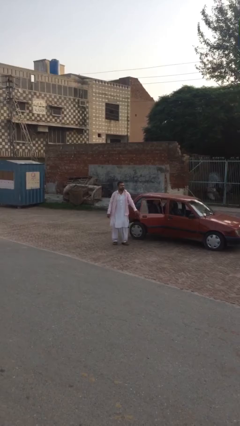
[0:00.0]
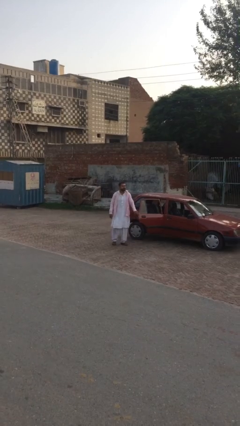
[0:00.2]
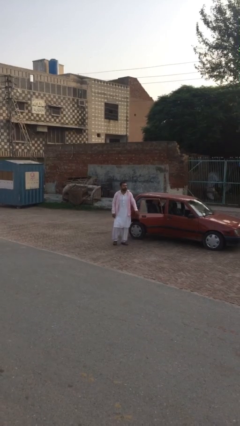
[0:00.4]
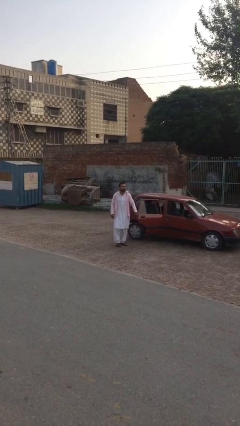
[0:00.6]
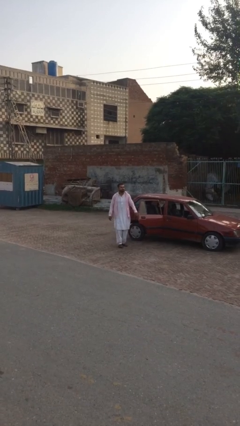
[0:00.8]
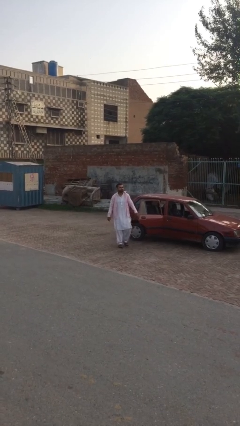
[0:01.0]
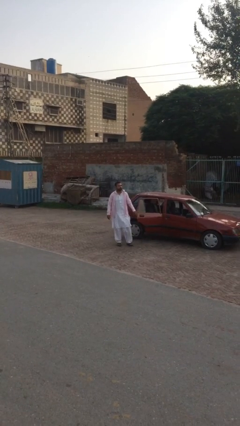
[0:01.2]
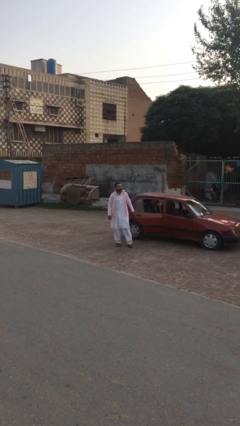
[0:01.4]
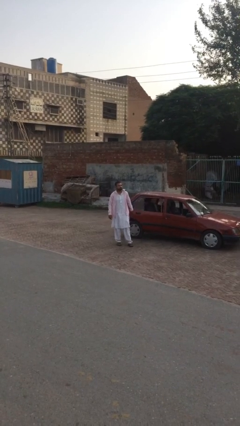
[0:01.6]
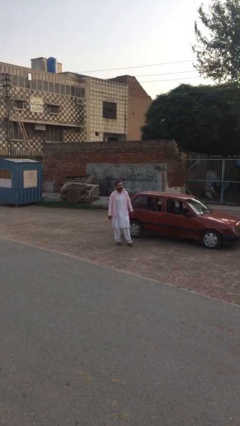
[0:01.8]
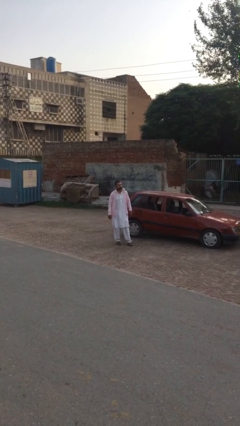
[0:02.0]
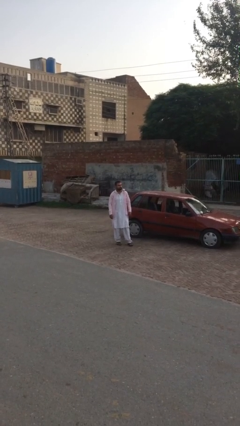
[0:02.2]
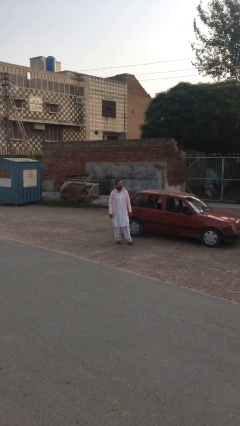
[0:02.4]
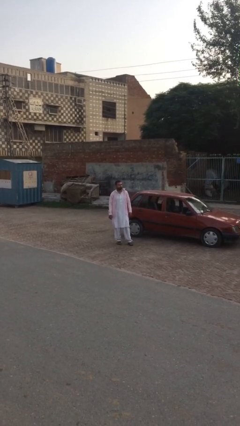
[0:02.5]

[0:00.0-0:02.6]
person closes car door

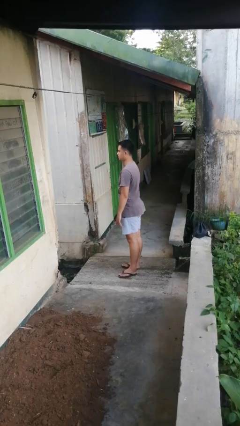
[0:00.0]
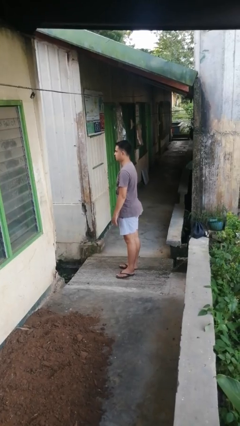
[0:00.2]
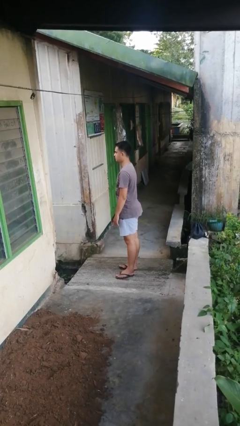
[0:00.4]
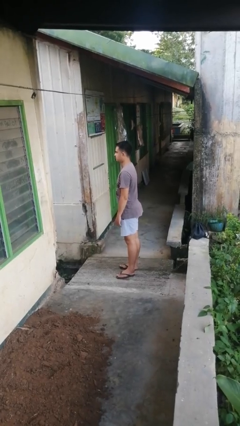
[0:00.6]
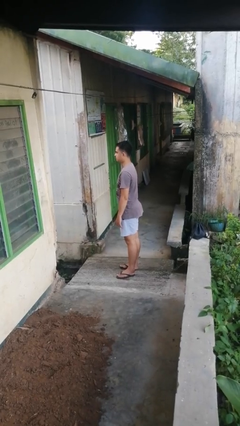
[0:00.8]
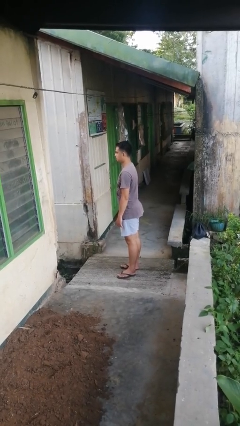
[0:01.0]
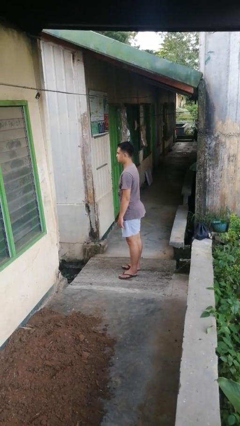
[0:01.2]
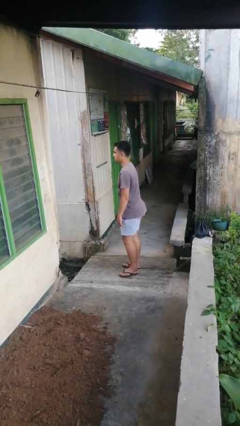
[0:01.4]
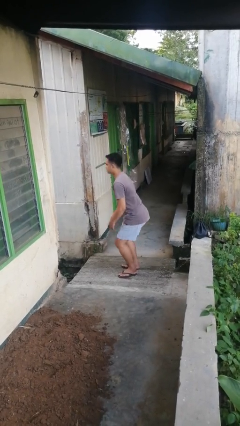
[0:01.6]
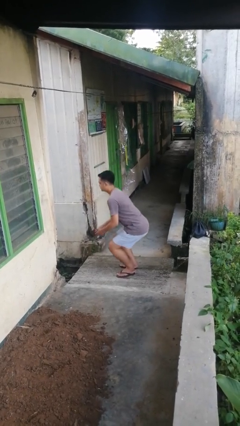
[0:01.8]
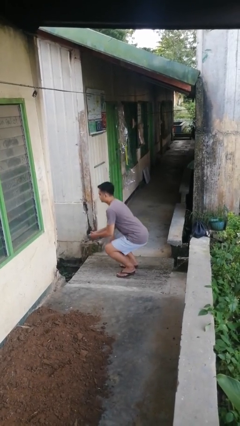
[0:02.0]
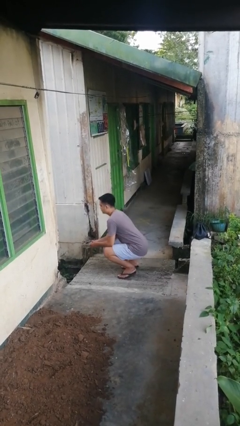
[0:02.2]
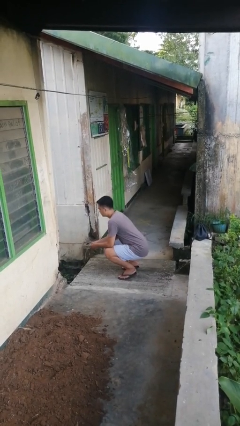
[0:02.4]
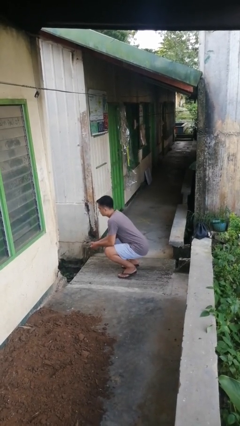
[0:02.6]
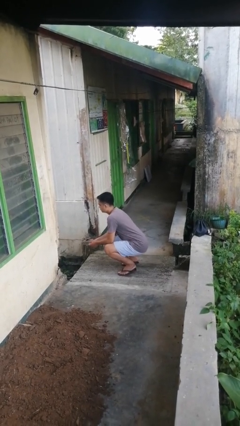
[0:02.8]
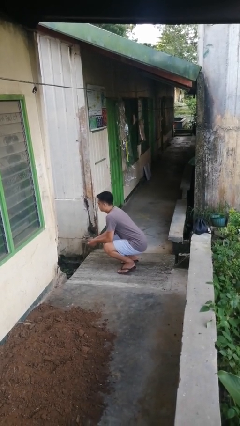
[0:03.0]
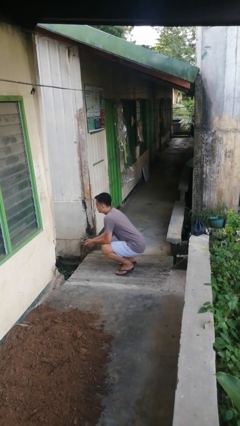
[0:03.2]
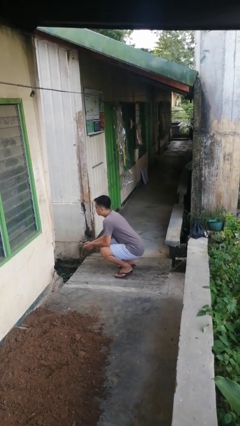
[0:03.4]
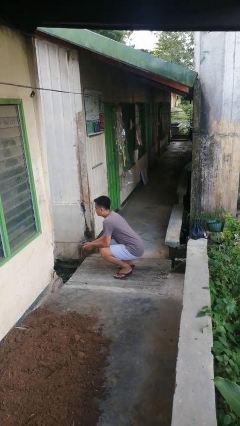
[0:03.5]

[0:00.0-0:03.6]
person squats

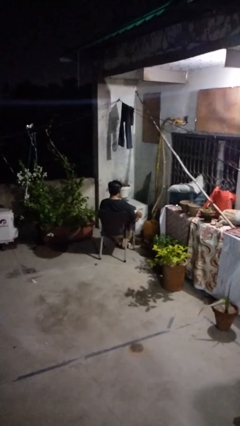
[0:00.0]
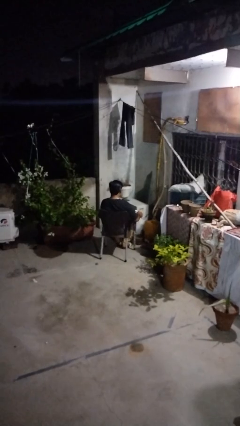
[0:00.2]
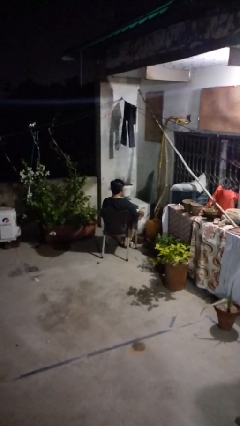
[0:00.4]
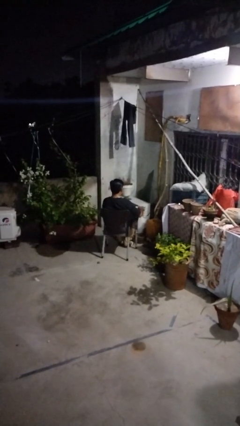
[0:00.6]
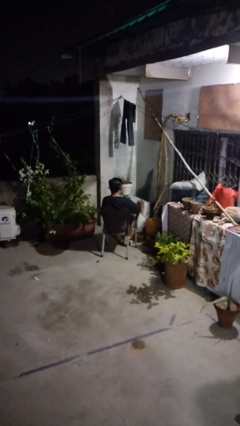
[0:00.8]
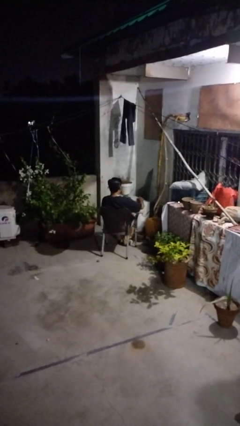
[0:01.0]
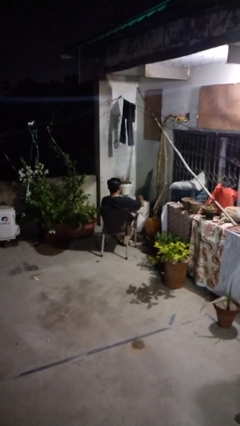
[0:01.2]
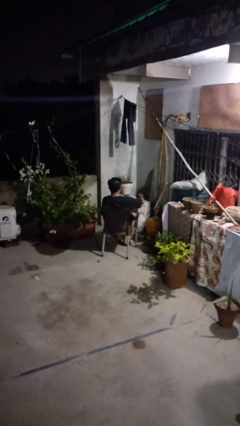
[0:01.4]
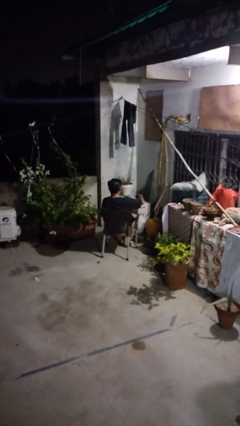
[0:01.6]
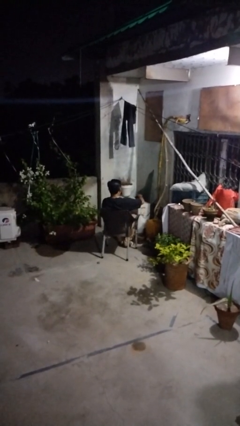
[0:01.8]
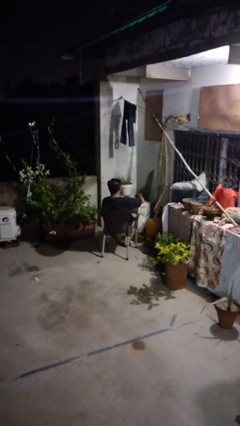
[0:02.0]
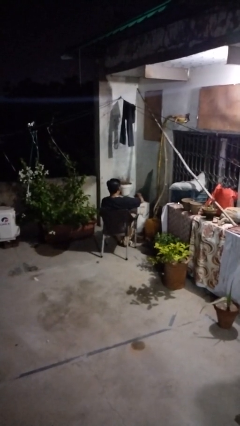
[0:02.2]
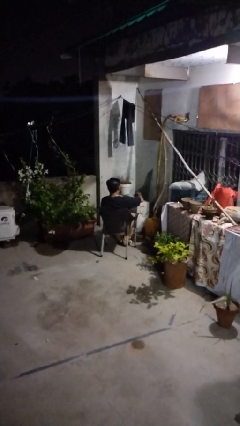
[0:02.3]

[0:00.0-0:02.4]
person pours coffee into mug

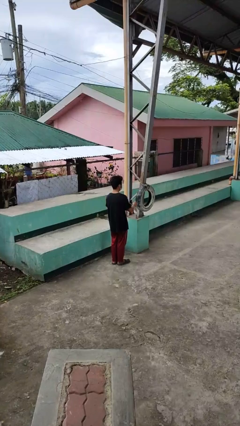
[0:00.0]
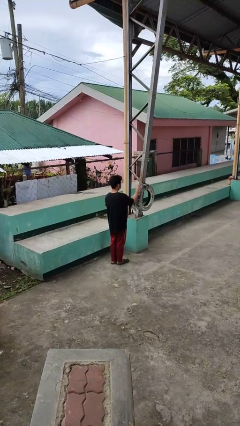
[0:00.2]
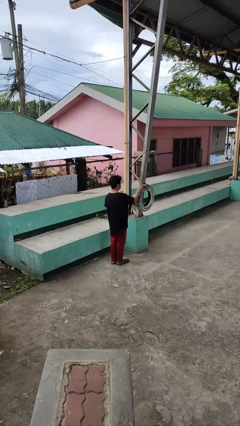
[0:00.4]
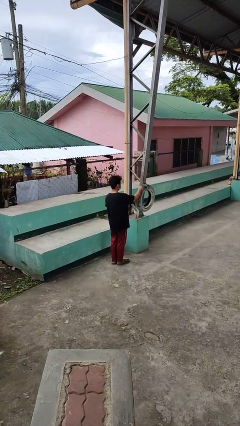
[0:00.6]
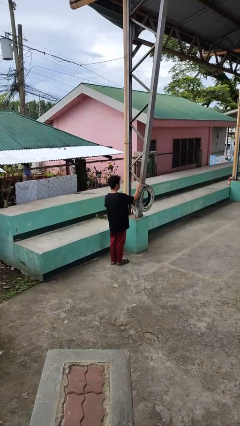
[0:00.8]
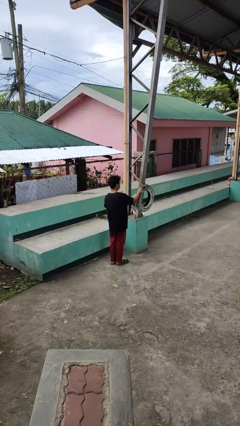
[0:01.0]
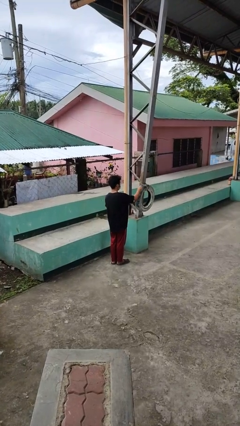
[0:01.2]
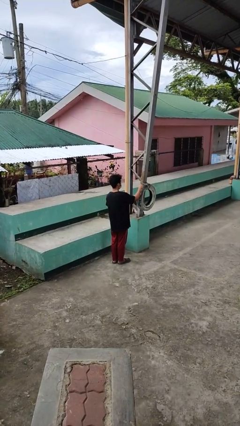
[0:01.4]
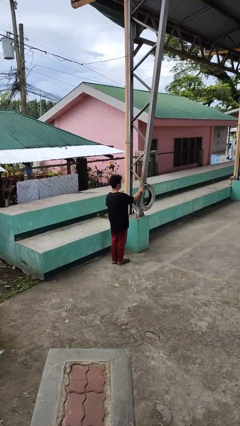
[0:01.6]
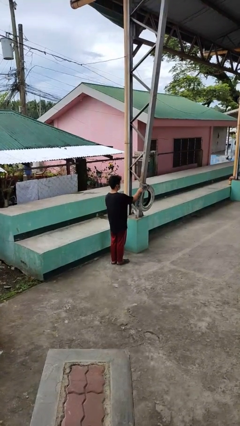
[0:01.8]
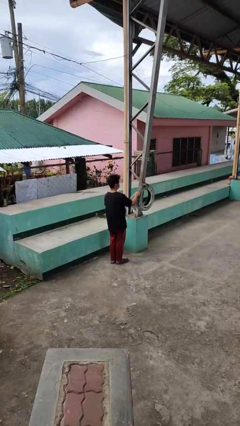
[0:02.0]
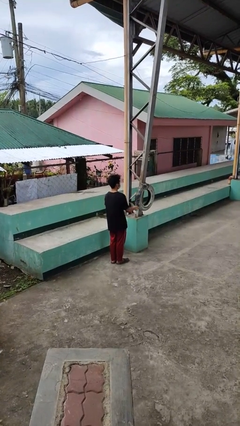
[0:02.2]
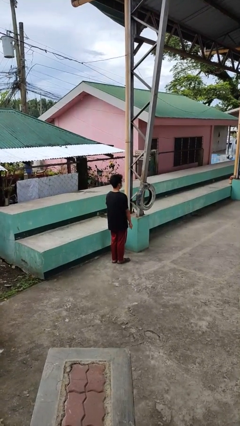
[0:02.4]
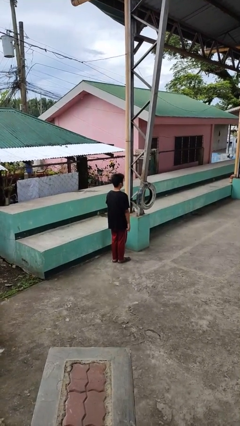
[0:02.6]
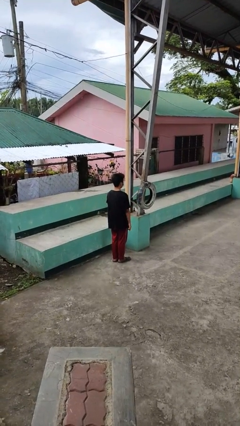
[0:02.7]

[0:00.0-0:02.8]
person taps object with finger

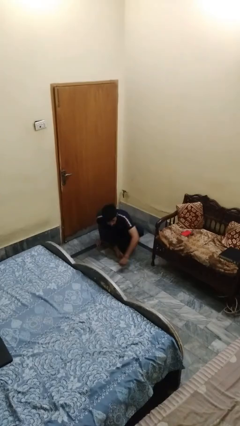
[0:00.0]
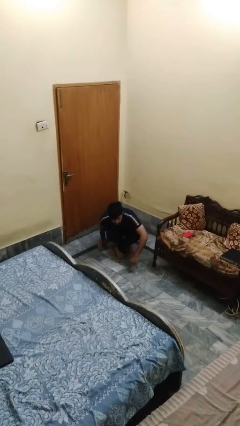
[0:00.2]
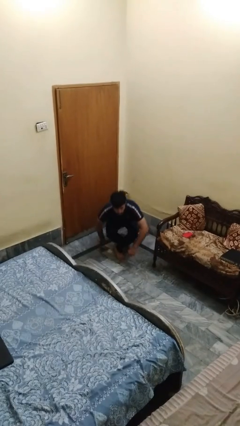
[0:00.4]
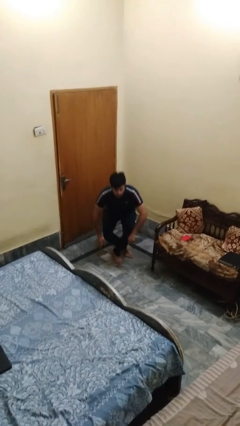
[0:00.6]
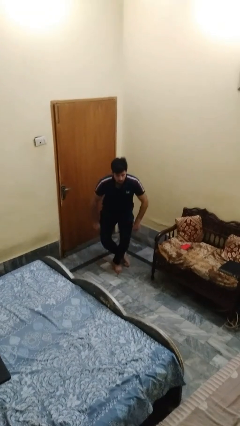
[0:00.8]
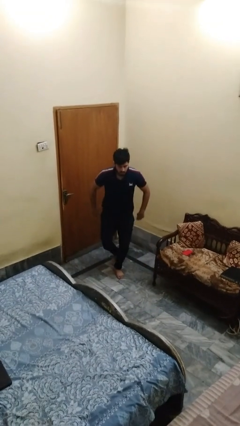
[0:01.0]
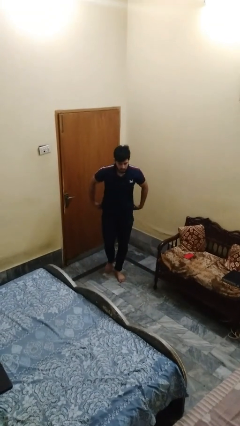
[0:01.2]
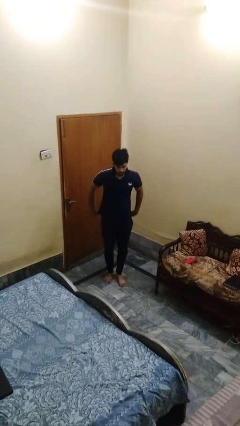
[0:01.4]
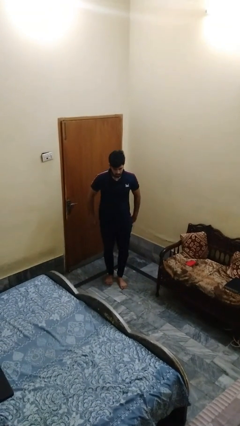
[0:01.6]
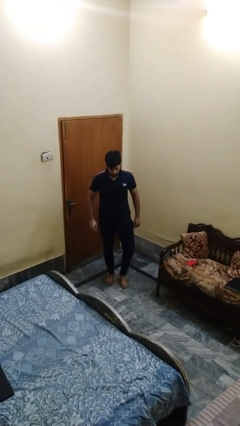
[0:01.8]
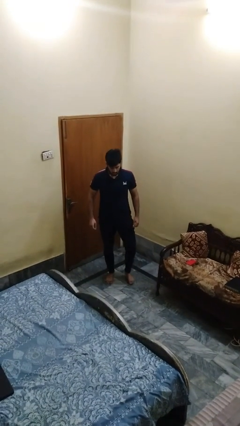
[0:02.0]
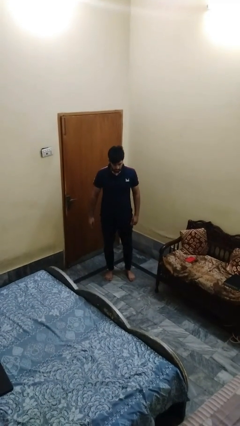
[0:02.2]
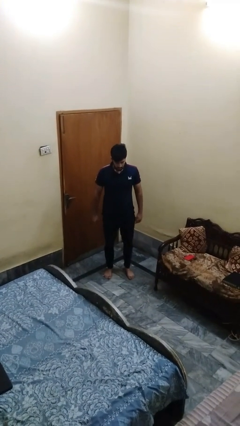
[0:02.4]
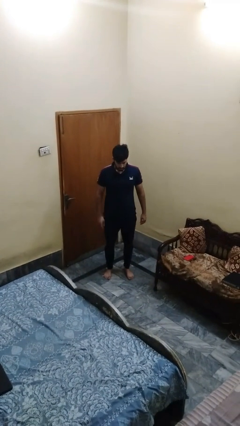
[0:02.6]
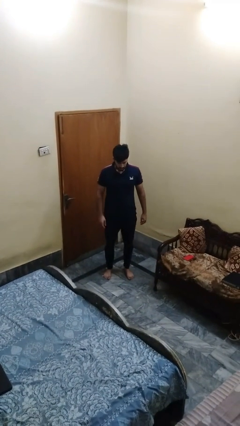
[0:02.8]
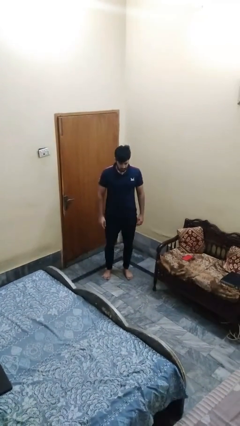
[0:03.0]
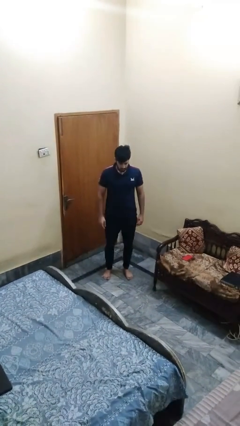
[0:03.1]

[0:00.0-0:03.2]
person stands up from floor

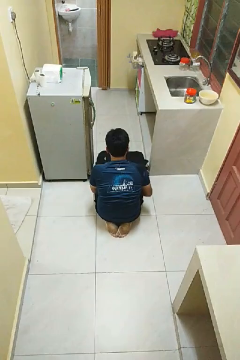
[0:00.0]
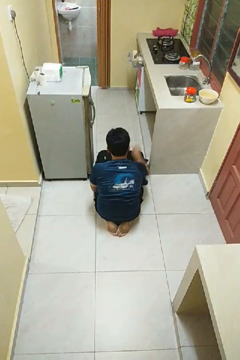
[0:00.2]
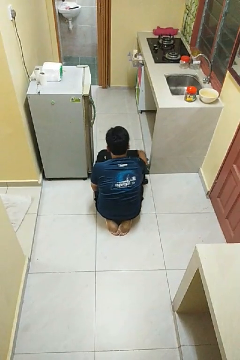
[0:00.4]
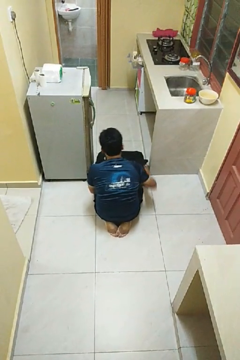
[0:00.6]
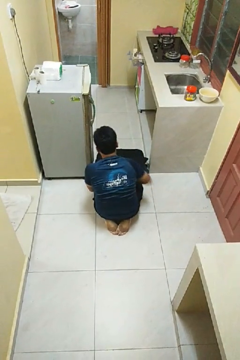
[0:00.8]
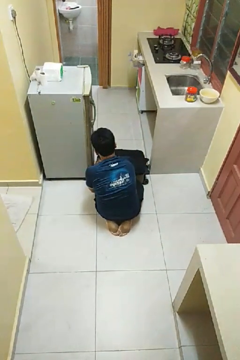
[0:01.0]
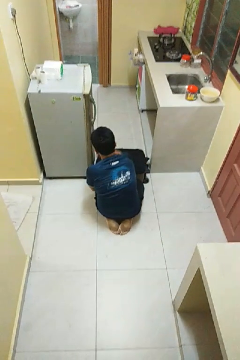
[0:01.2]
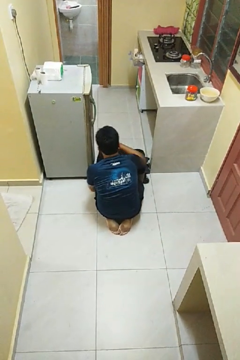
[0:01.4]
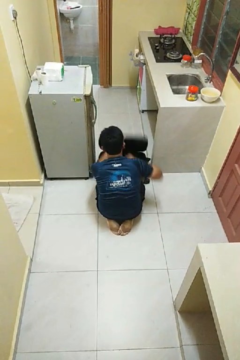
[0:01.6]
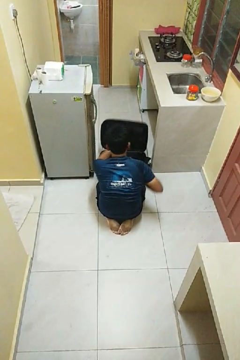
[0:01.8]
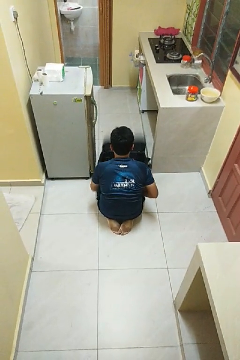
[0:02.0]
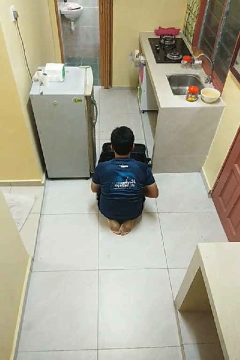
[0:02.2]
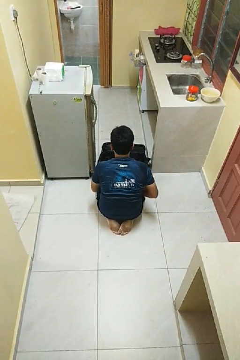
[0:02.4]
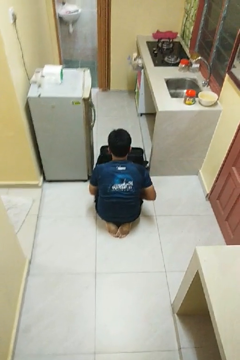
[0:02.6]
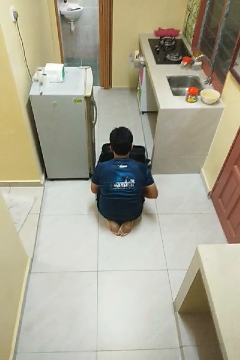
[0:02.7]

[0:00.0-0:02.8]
person opens suitcase
